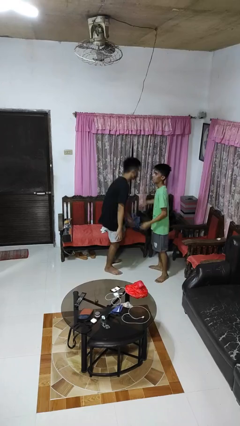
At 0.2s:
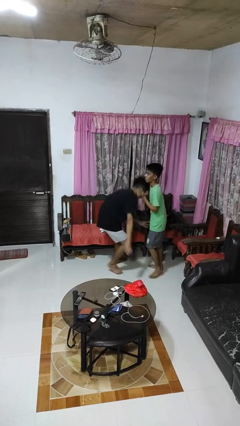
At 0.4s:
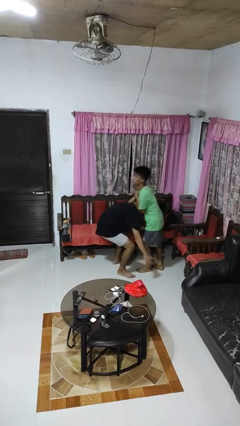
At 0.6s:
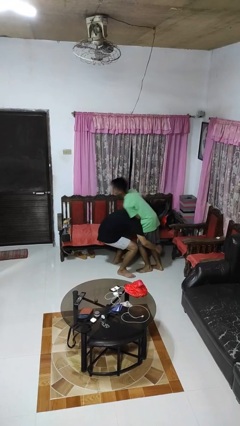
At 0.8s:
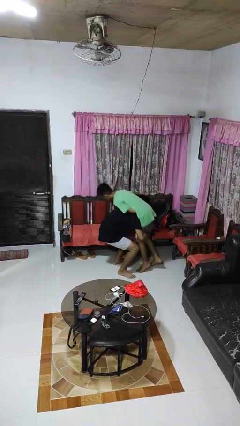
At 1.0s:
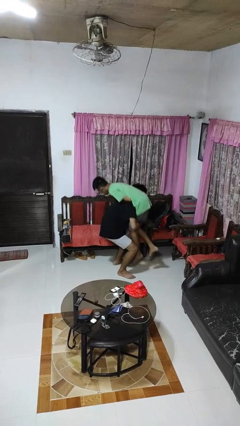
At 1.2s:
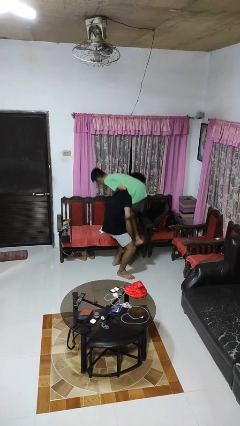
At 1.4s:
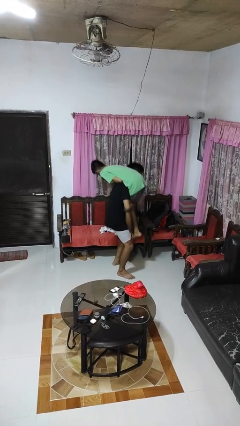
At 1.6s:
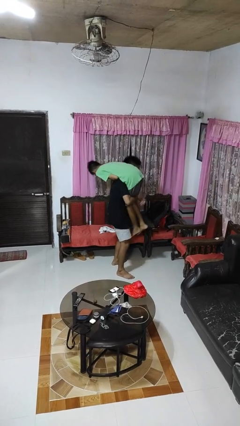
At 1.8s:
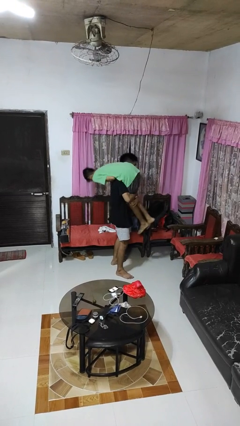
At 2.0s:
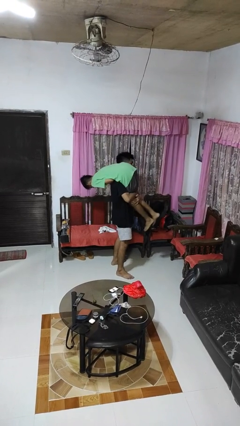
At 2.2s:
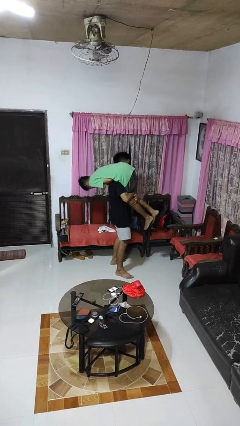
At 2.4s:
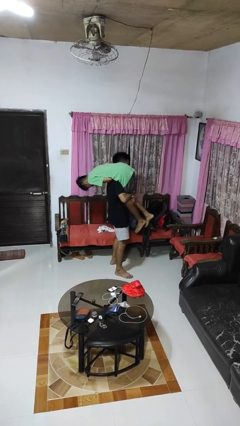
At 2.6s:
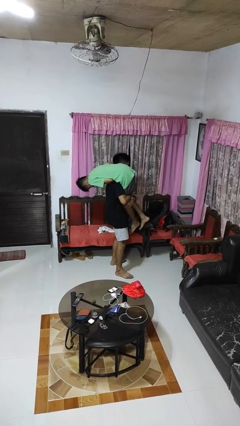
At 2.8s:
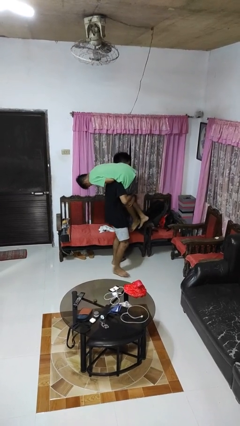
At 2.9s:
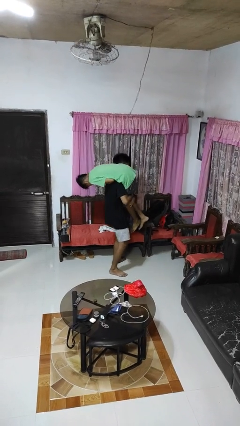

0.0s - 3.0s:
person carries person over shoulder

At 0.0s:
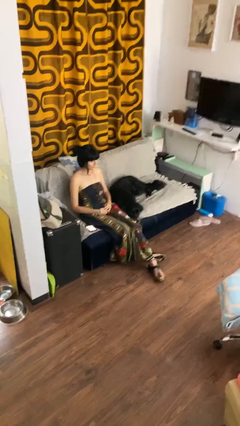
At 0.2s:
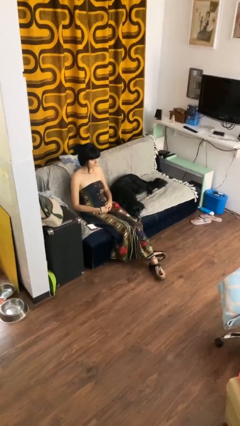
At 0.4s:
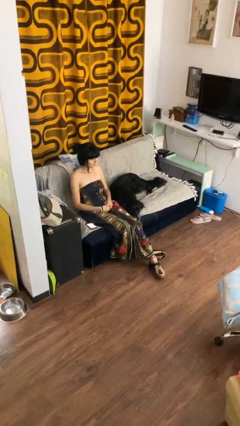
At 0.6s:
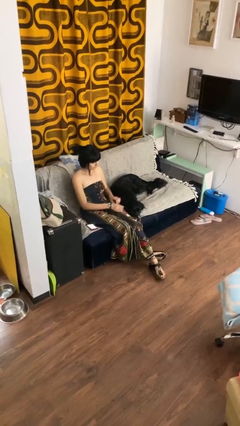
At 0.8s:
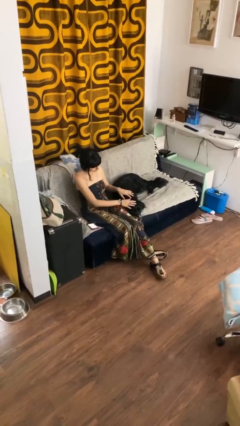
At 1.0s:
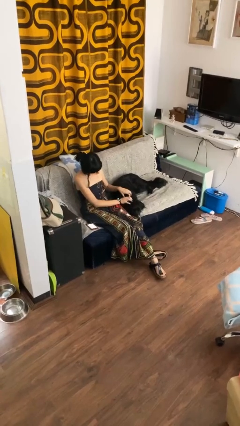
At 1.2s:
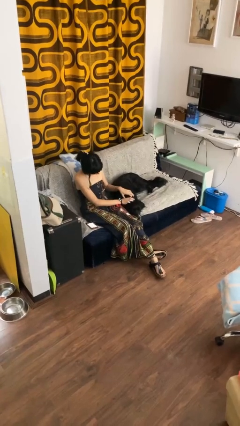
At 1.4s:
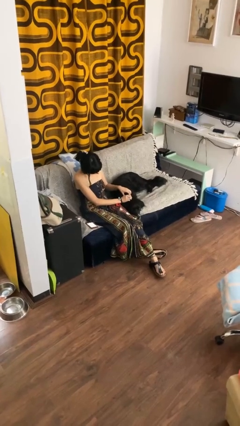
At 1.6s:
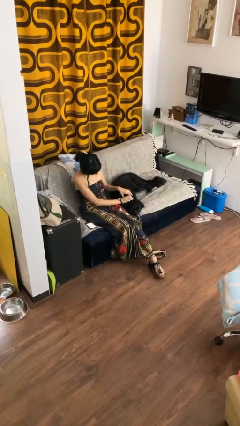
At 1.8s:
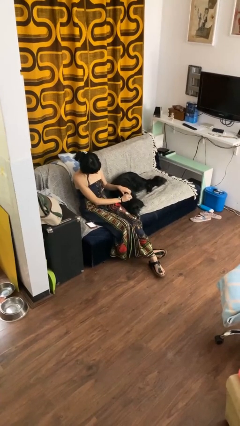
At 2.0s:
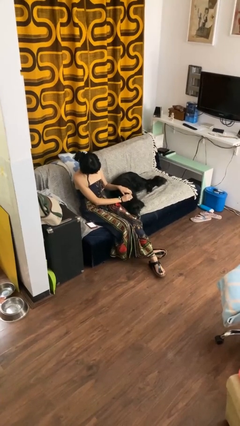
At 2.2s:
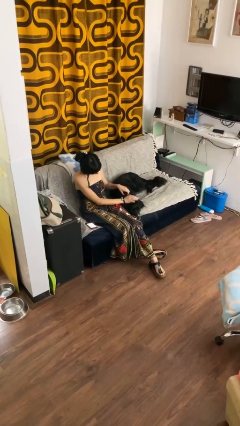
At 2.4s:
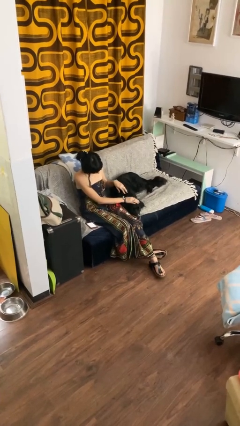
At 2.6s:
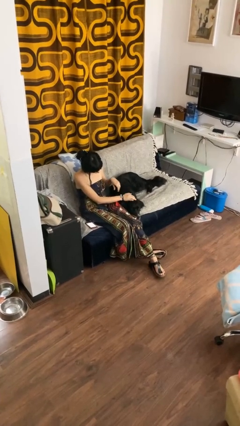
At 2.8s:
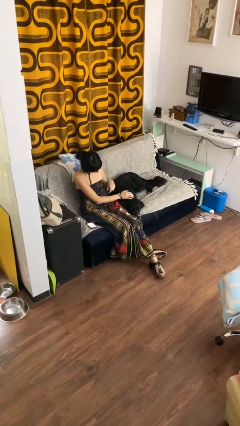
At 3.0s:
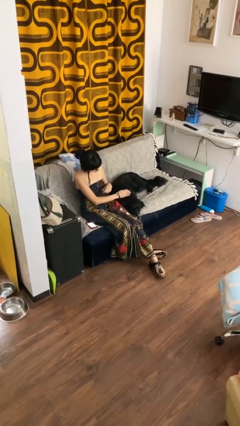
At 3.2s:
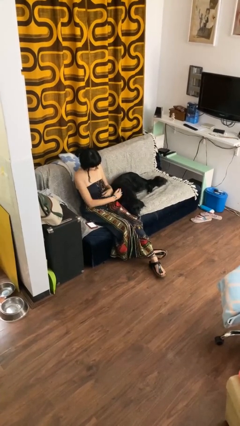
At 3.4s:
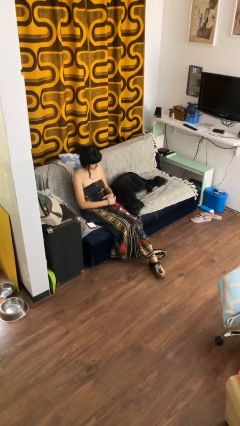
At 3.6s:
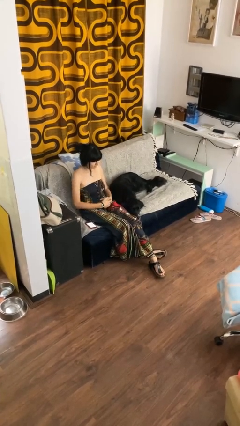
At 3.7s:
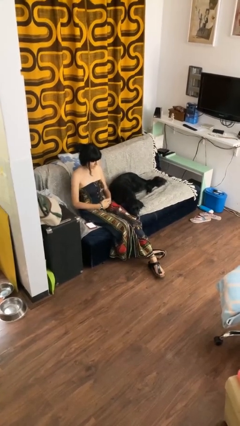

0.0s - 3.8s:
person pets dog

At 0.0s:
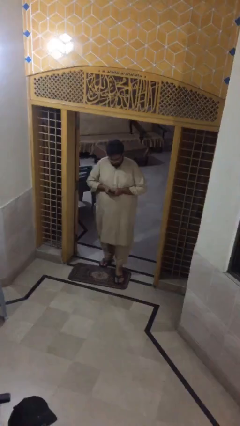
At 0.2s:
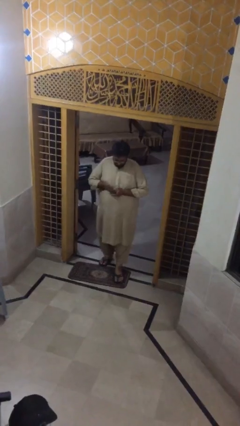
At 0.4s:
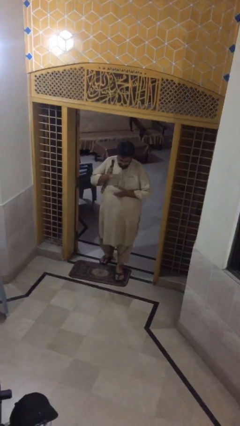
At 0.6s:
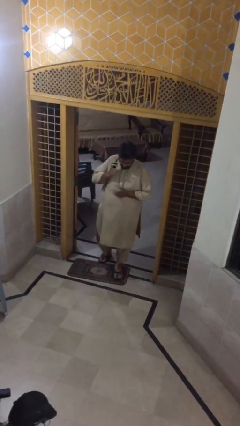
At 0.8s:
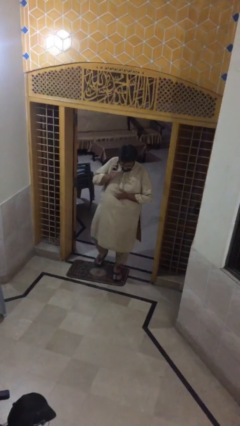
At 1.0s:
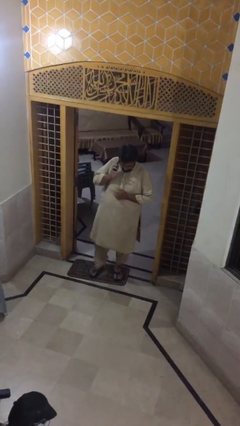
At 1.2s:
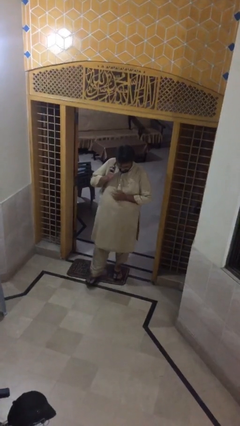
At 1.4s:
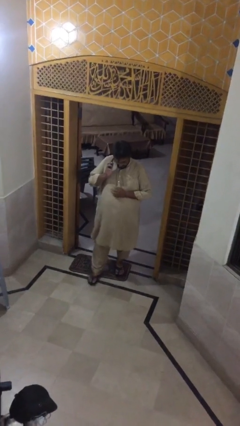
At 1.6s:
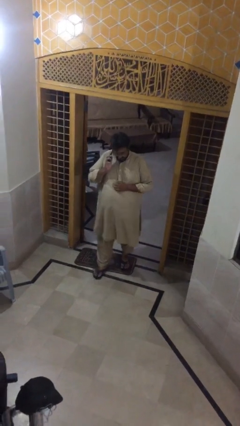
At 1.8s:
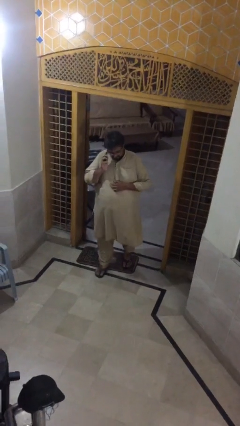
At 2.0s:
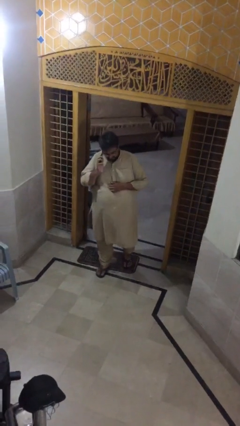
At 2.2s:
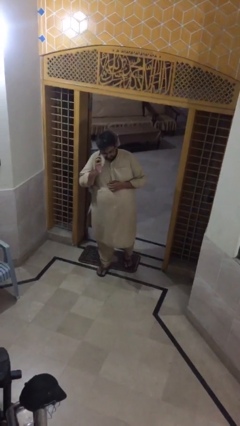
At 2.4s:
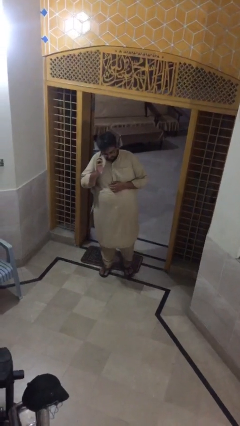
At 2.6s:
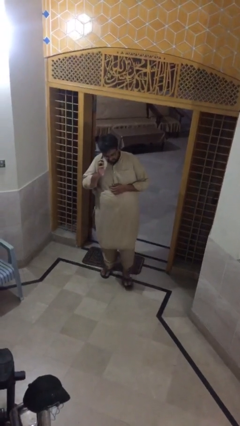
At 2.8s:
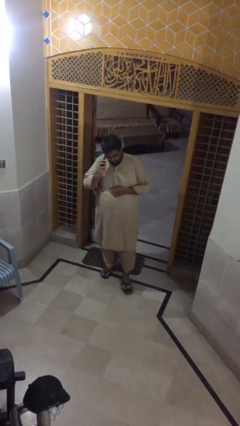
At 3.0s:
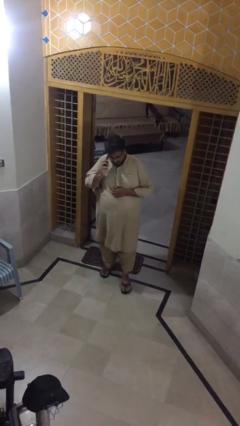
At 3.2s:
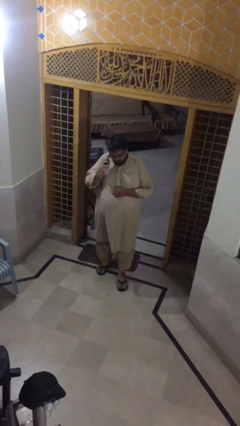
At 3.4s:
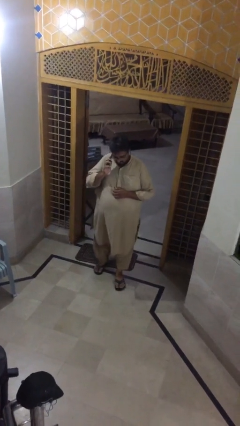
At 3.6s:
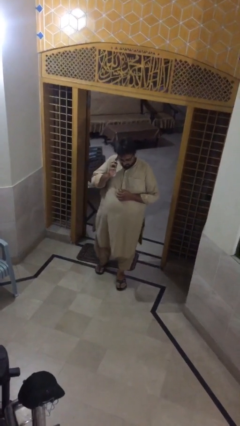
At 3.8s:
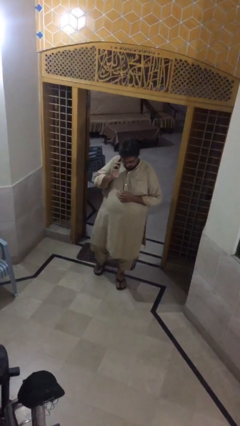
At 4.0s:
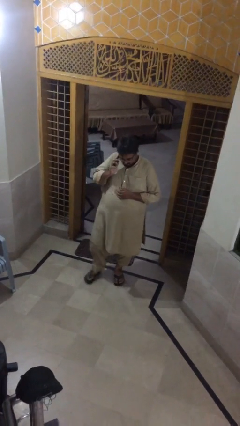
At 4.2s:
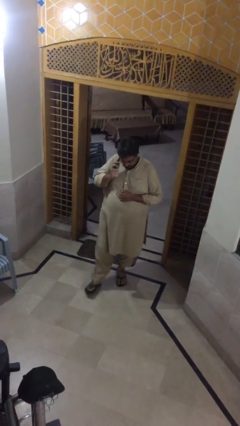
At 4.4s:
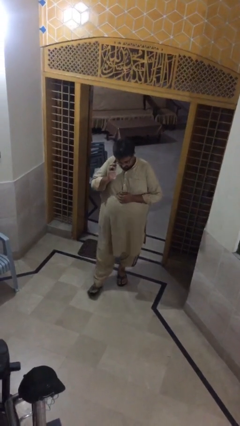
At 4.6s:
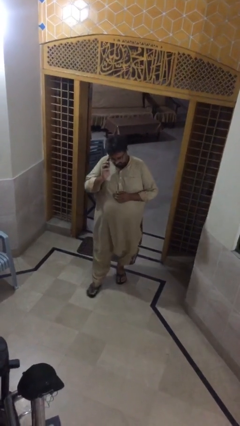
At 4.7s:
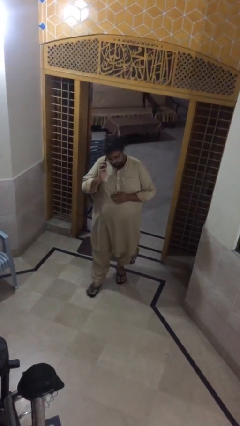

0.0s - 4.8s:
person talks on phone

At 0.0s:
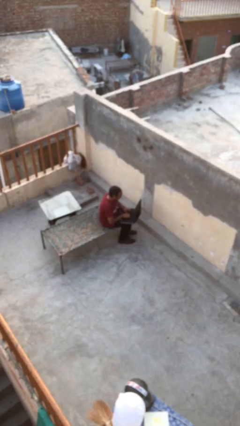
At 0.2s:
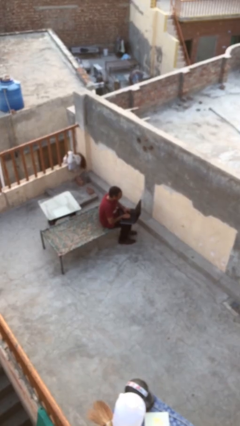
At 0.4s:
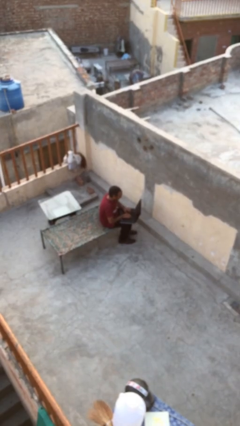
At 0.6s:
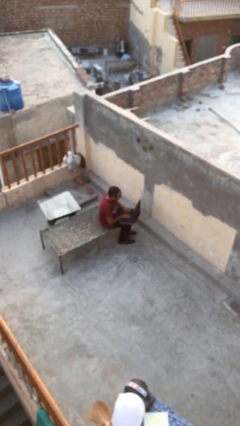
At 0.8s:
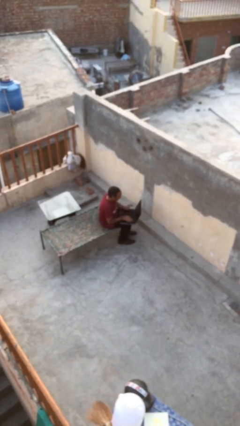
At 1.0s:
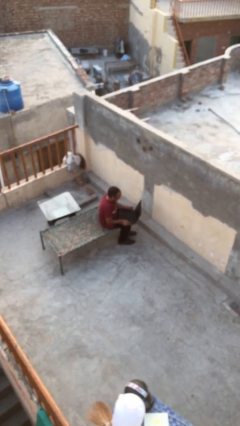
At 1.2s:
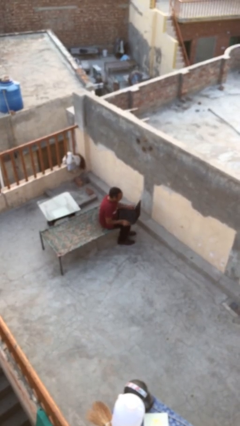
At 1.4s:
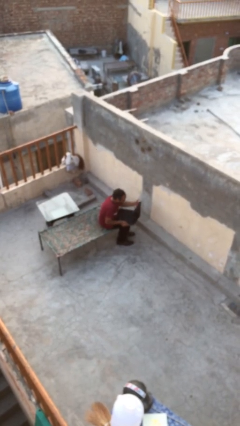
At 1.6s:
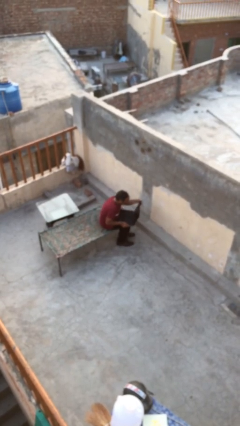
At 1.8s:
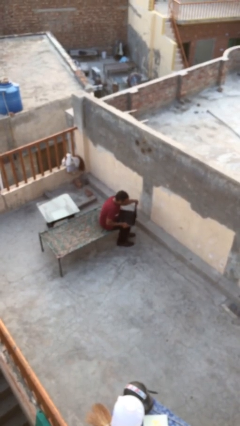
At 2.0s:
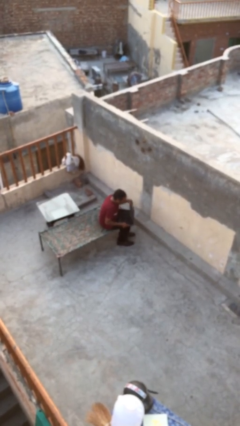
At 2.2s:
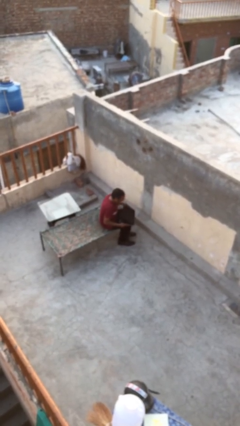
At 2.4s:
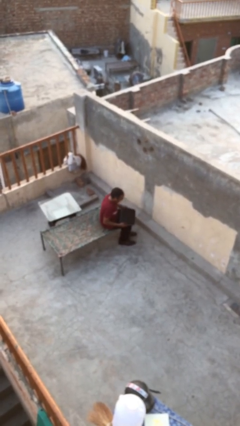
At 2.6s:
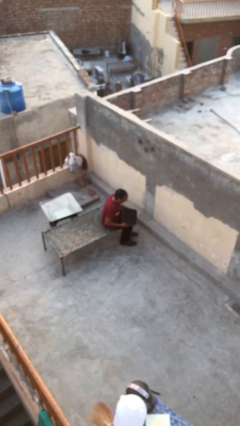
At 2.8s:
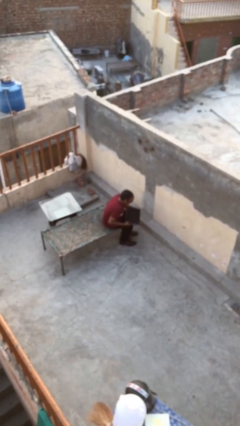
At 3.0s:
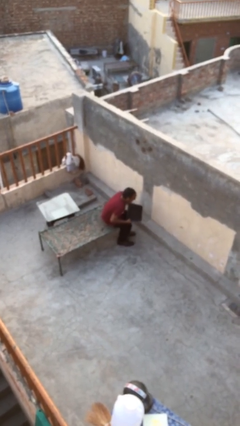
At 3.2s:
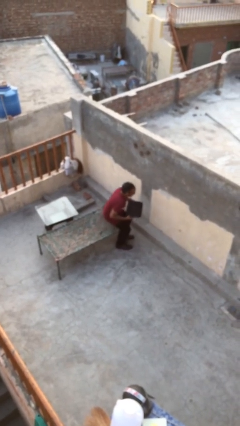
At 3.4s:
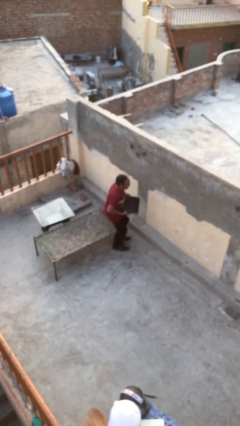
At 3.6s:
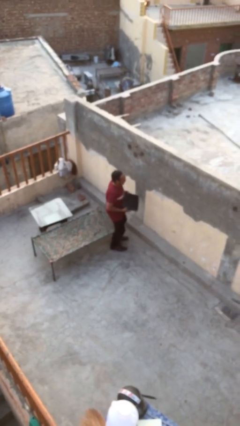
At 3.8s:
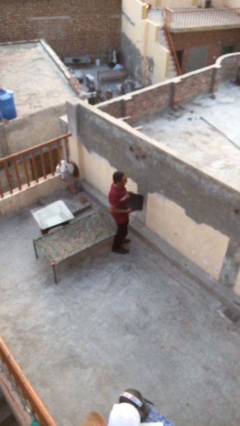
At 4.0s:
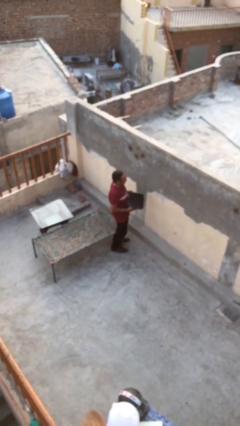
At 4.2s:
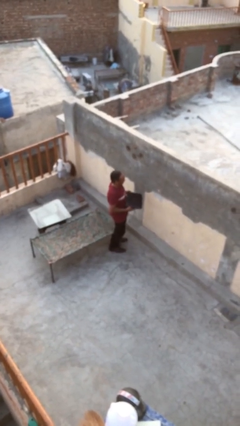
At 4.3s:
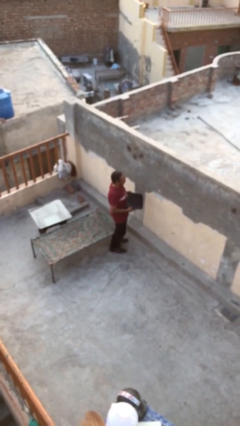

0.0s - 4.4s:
person stands up

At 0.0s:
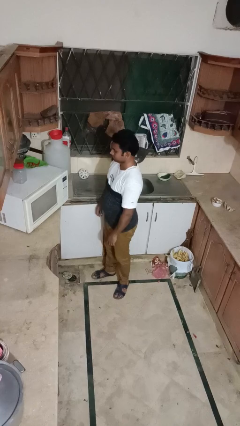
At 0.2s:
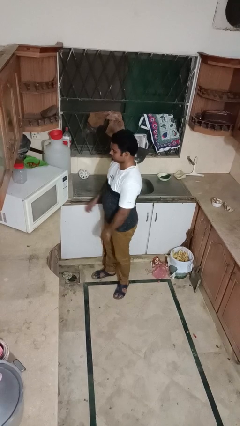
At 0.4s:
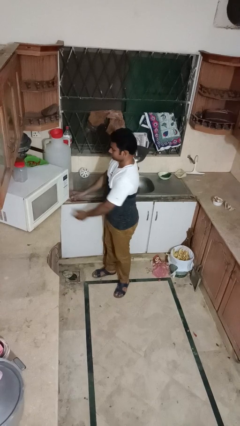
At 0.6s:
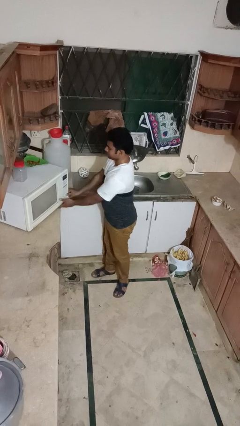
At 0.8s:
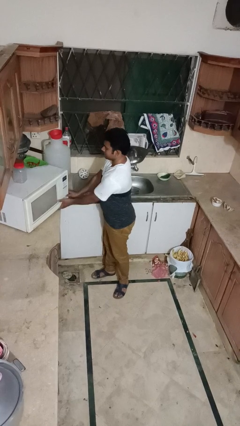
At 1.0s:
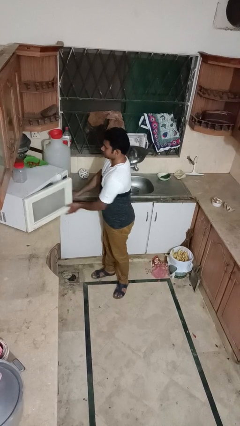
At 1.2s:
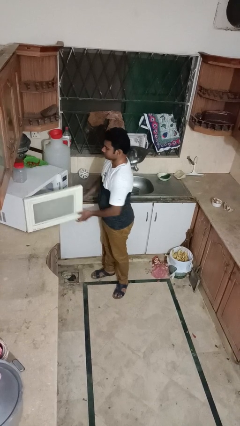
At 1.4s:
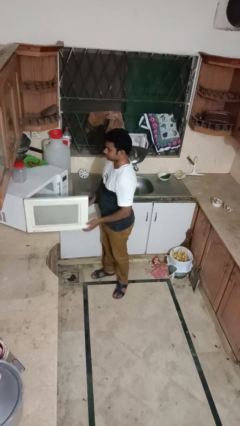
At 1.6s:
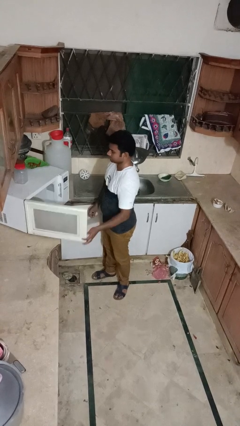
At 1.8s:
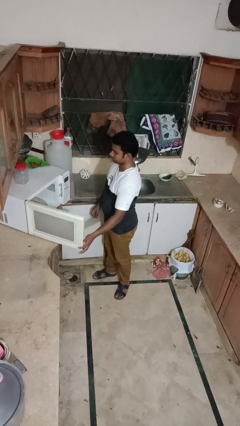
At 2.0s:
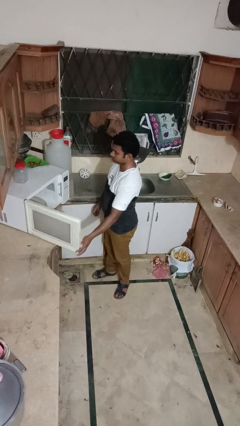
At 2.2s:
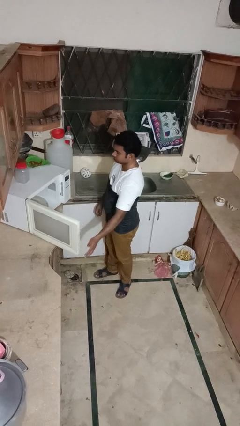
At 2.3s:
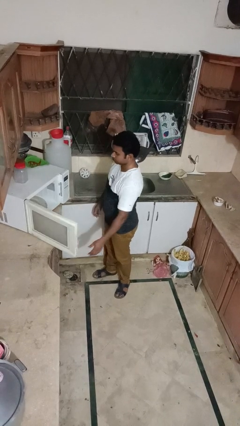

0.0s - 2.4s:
person opens oven door
